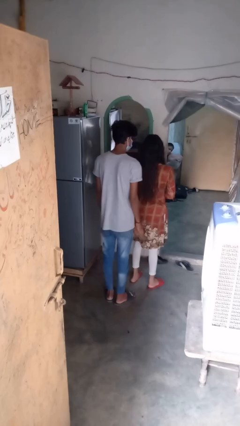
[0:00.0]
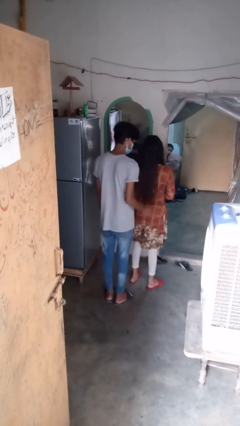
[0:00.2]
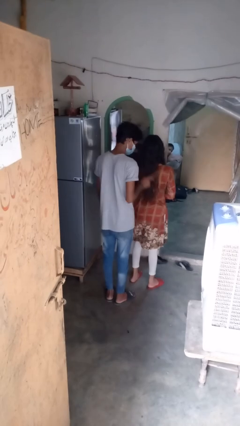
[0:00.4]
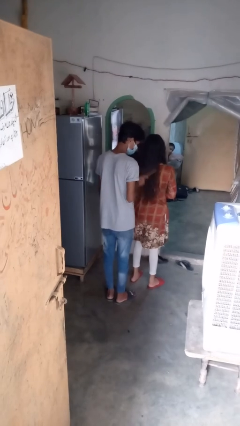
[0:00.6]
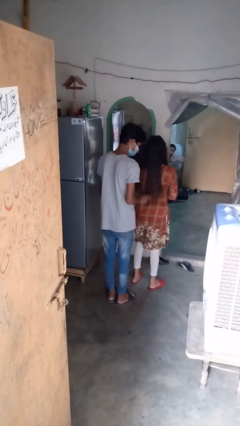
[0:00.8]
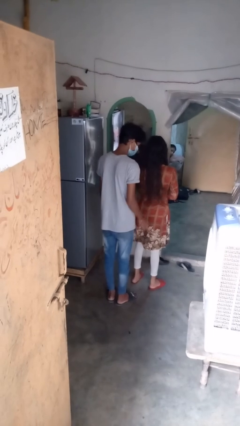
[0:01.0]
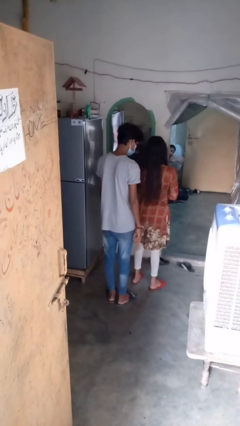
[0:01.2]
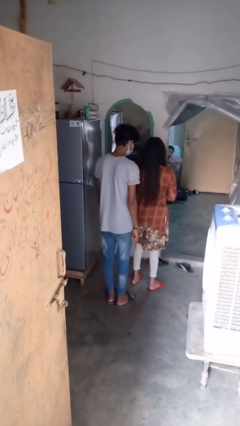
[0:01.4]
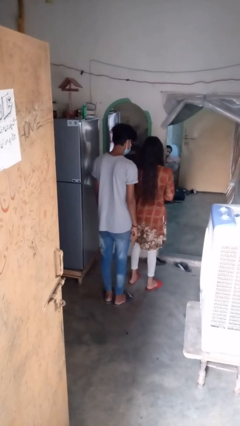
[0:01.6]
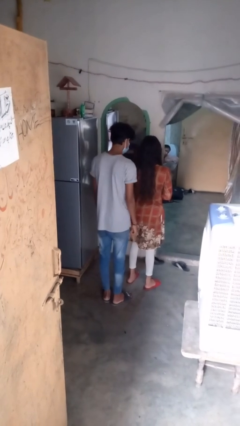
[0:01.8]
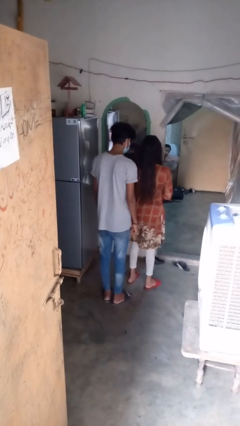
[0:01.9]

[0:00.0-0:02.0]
person brushes hair of person

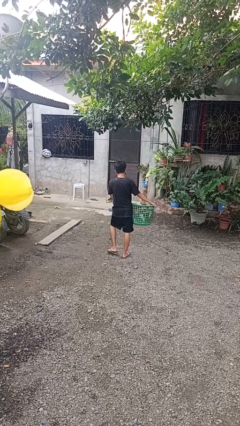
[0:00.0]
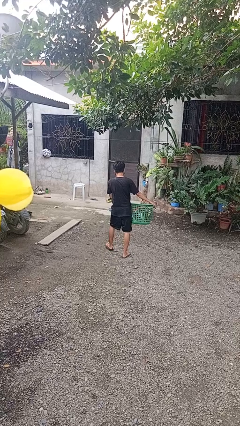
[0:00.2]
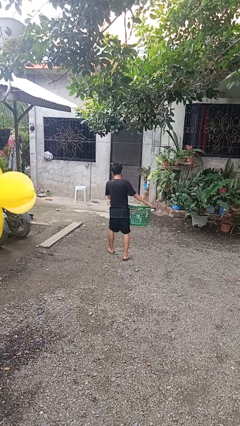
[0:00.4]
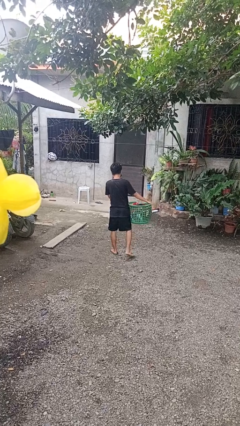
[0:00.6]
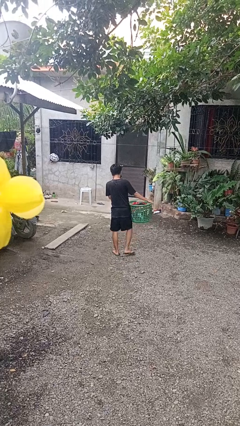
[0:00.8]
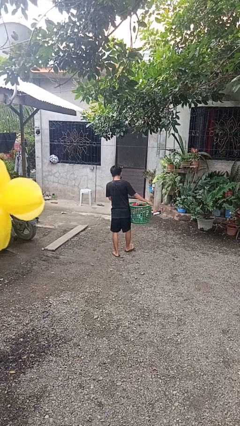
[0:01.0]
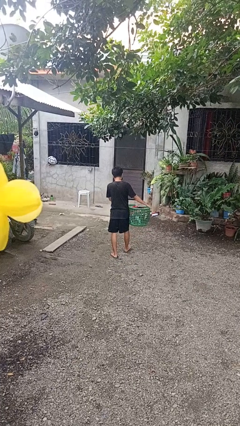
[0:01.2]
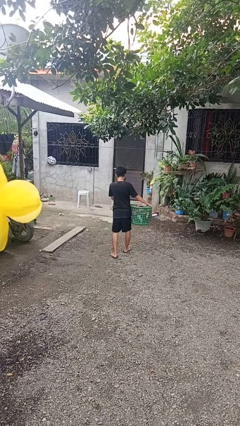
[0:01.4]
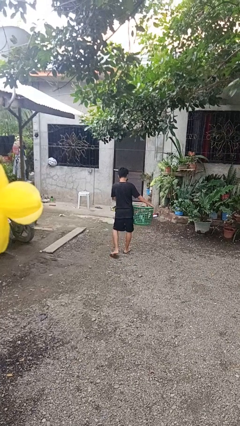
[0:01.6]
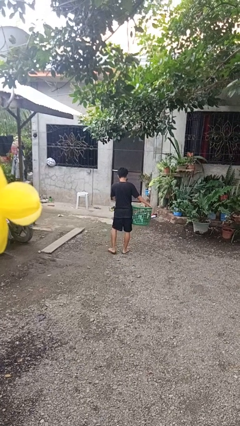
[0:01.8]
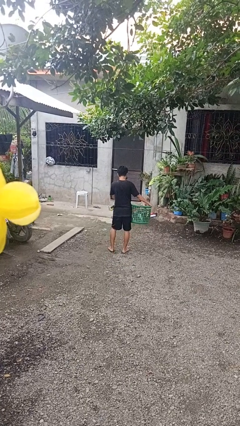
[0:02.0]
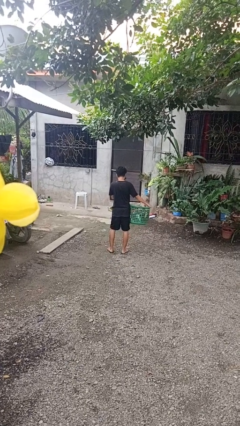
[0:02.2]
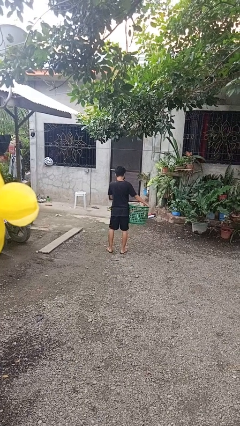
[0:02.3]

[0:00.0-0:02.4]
person carries laundry basket

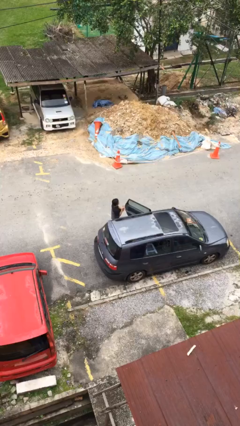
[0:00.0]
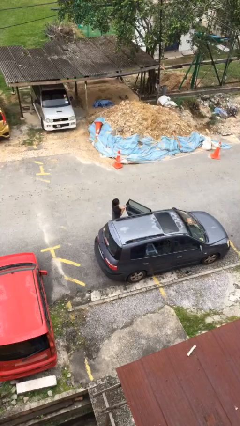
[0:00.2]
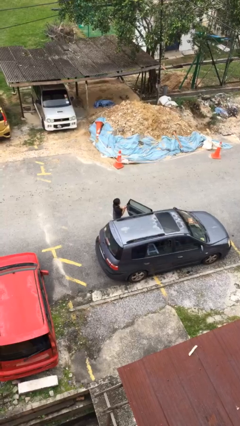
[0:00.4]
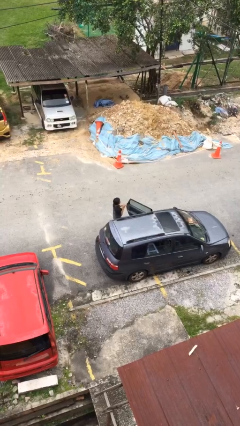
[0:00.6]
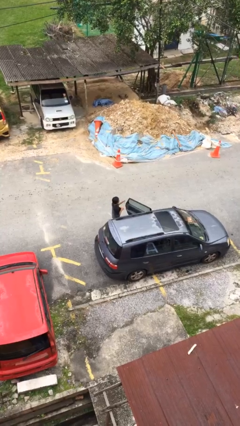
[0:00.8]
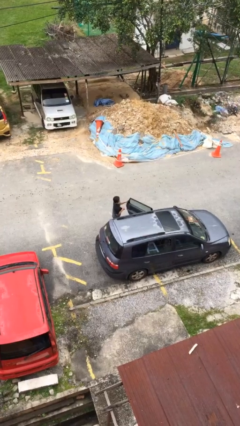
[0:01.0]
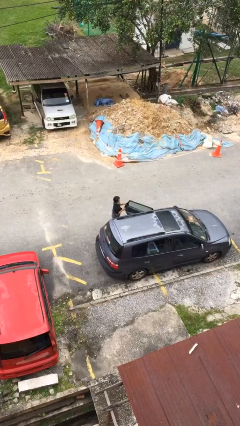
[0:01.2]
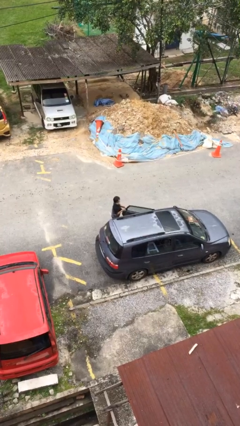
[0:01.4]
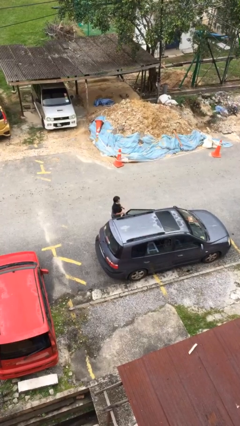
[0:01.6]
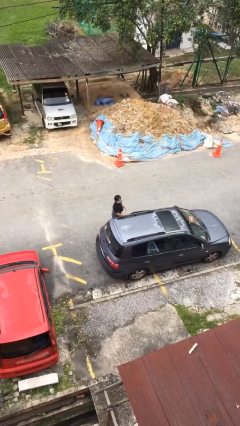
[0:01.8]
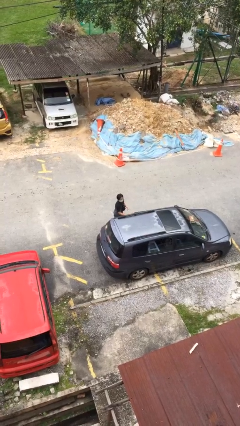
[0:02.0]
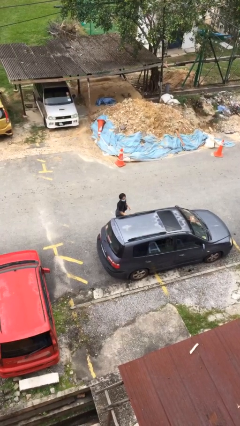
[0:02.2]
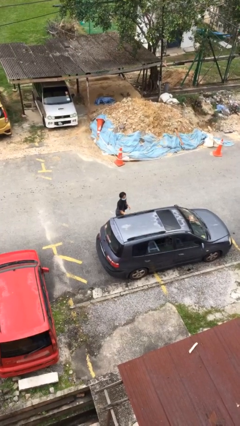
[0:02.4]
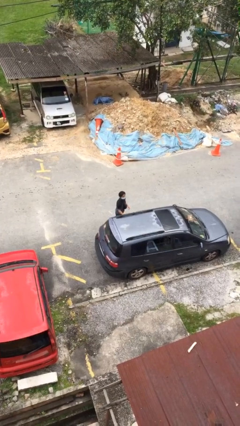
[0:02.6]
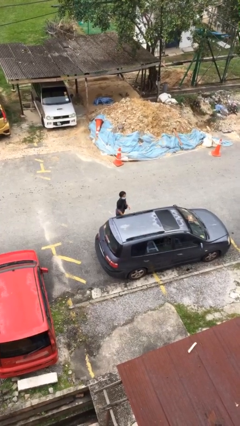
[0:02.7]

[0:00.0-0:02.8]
person closes car door

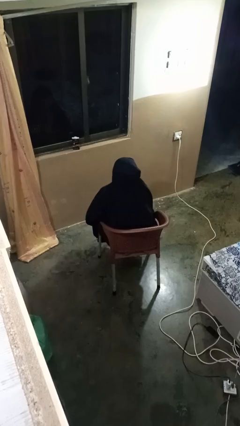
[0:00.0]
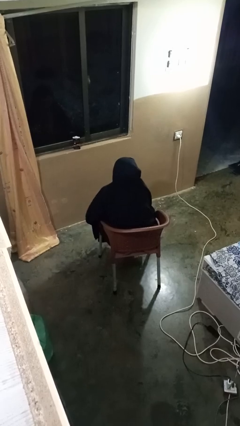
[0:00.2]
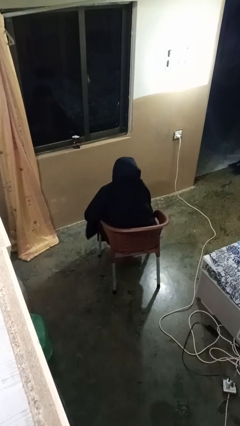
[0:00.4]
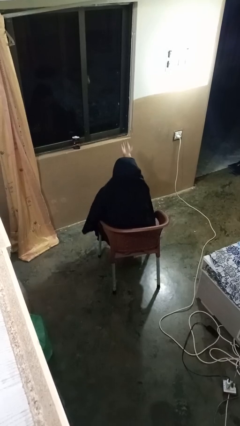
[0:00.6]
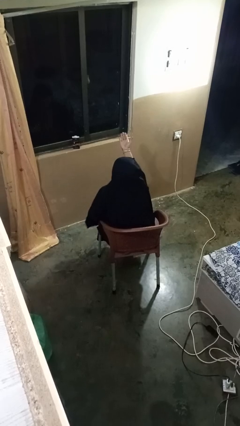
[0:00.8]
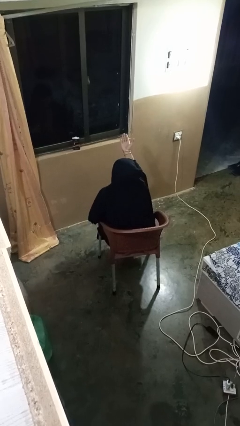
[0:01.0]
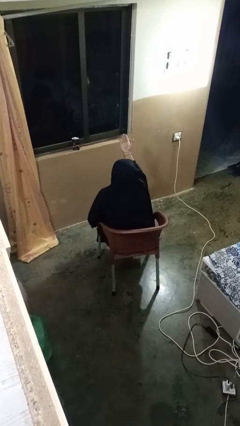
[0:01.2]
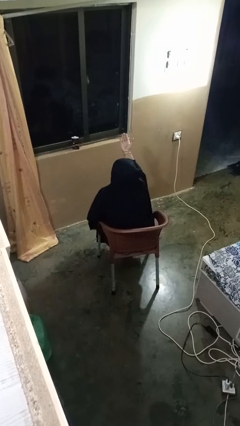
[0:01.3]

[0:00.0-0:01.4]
person gestures swipe up

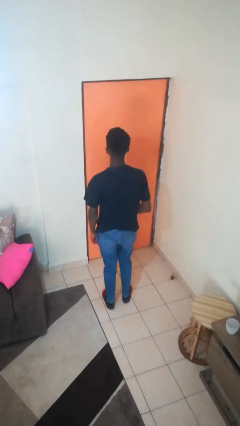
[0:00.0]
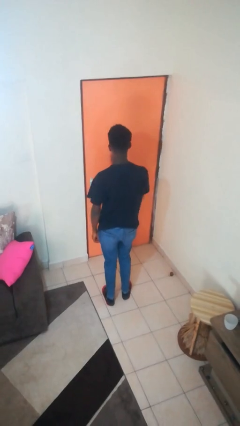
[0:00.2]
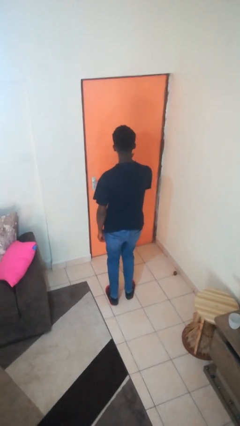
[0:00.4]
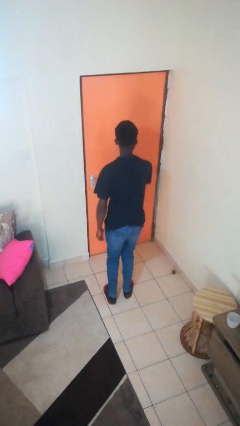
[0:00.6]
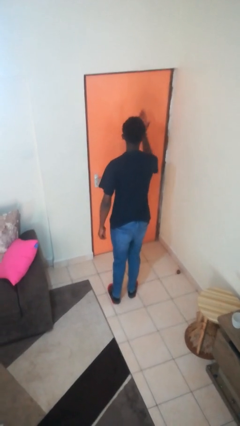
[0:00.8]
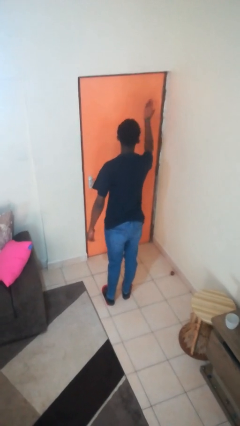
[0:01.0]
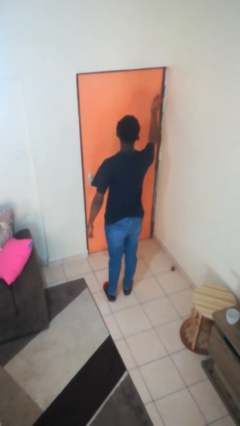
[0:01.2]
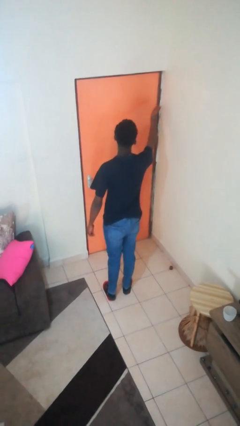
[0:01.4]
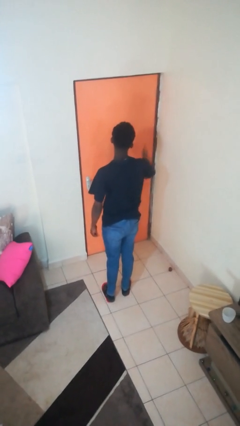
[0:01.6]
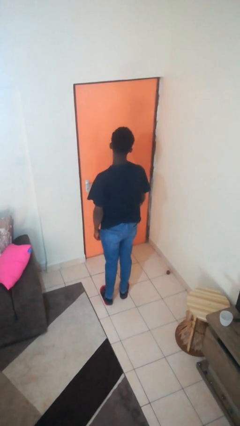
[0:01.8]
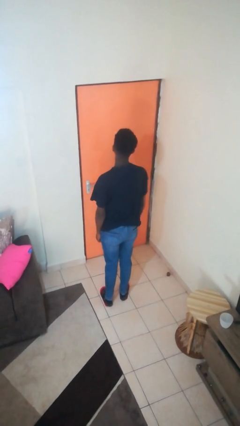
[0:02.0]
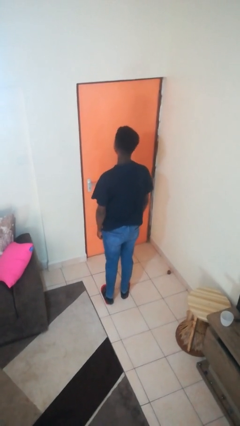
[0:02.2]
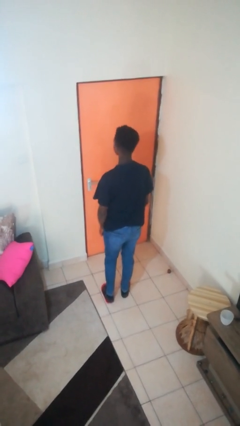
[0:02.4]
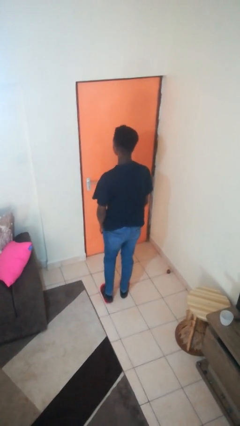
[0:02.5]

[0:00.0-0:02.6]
person gestures blow kiss

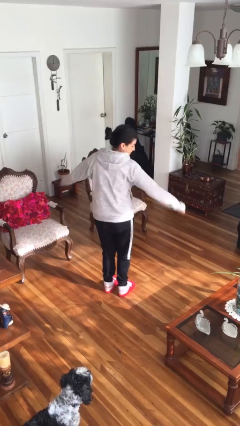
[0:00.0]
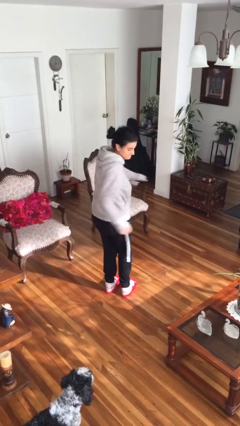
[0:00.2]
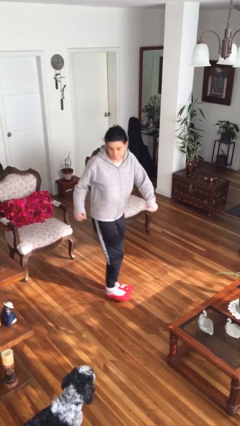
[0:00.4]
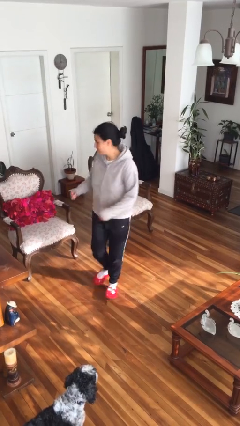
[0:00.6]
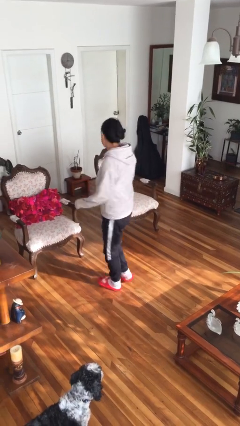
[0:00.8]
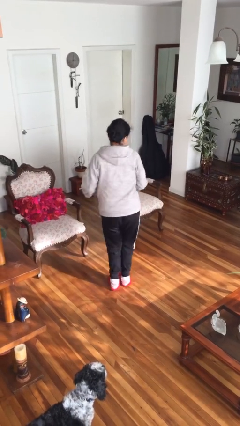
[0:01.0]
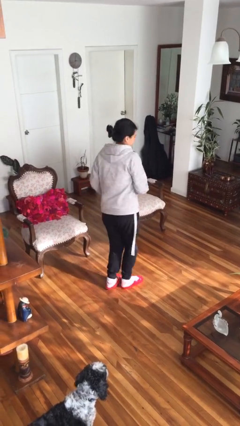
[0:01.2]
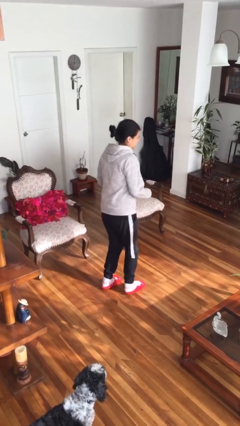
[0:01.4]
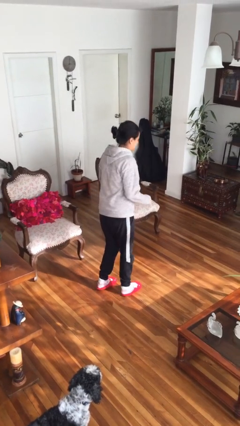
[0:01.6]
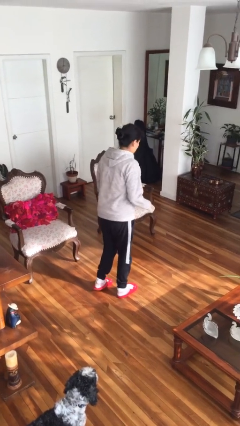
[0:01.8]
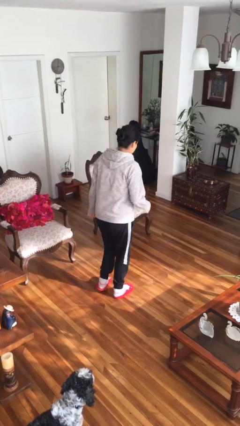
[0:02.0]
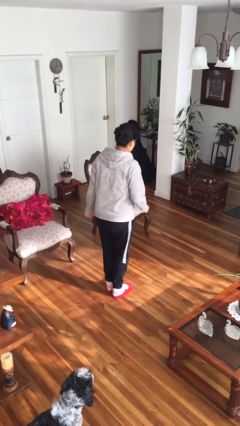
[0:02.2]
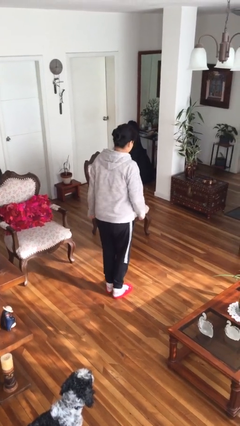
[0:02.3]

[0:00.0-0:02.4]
person twirls

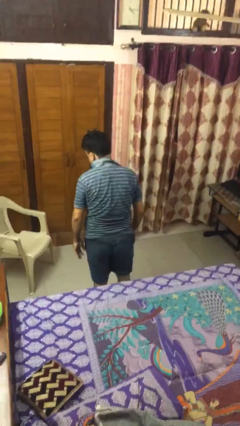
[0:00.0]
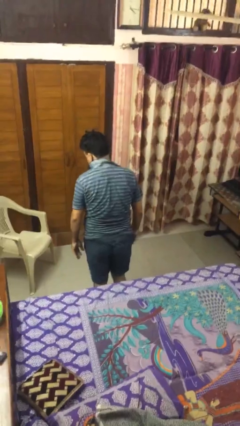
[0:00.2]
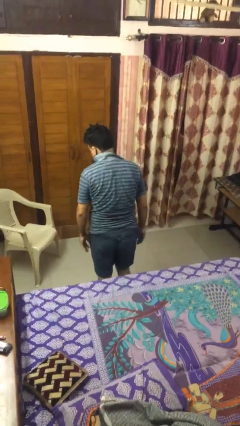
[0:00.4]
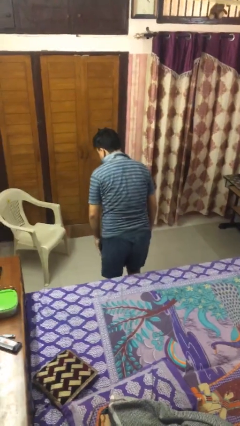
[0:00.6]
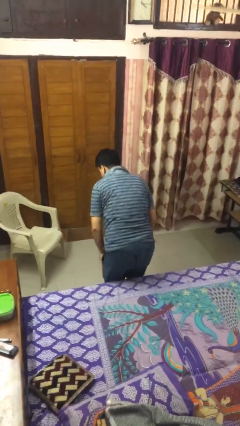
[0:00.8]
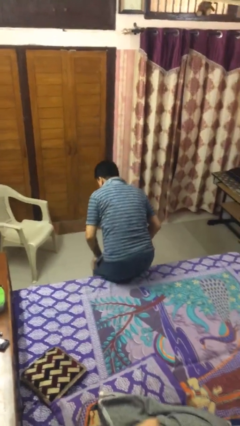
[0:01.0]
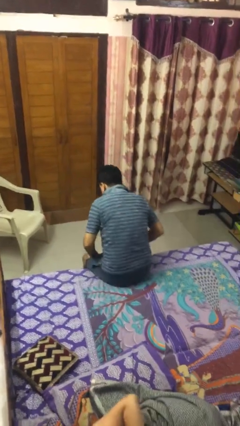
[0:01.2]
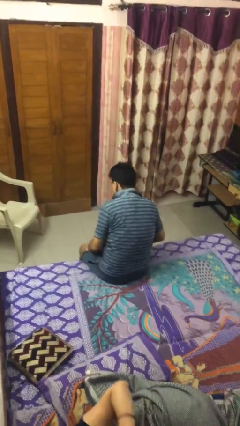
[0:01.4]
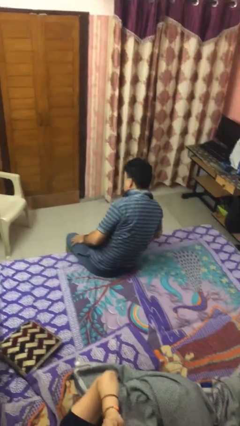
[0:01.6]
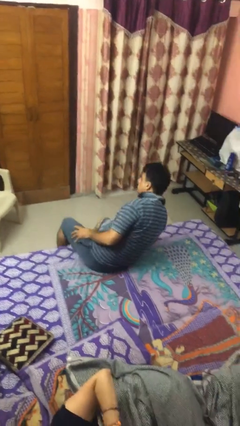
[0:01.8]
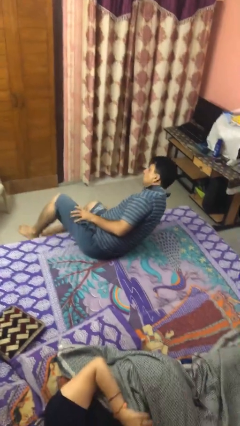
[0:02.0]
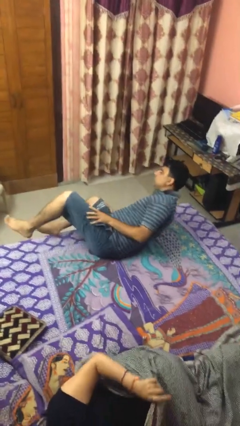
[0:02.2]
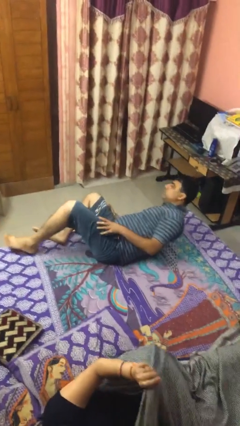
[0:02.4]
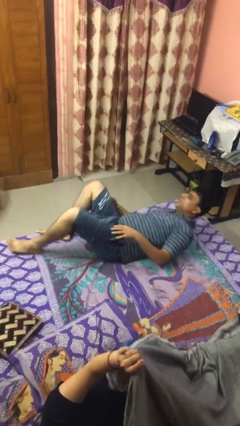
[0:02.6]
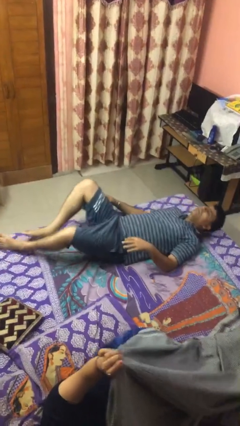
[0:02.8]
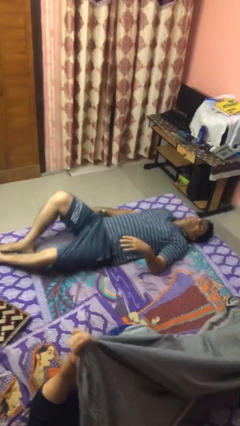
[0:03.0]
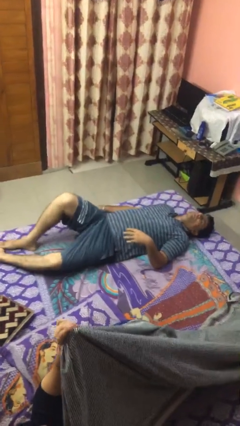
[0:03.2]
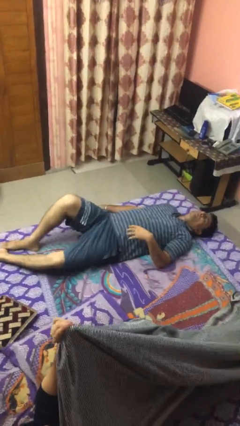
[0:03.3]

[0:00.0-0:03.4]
person lies down on bed
